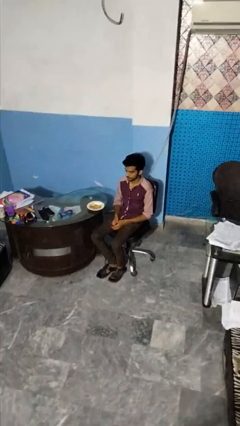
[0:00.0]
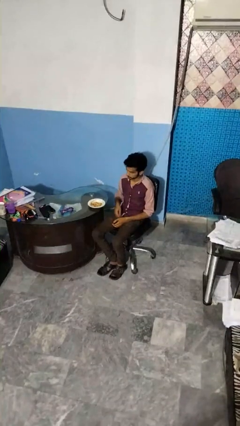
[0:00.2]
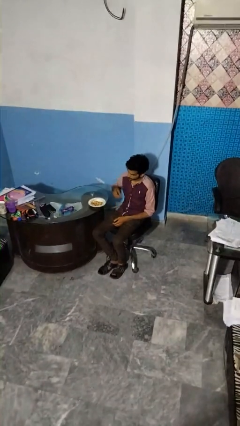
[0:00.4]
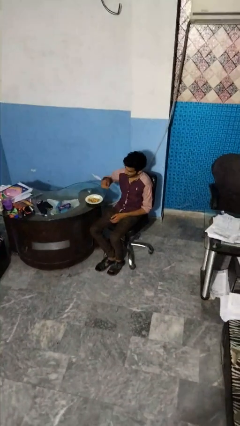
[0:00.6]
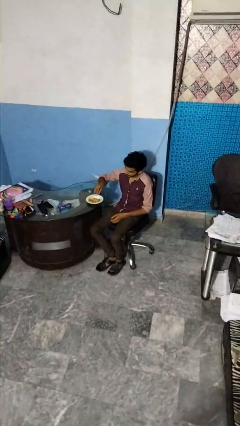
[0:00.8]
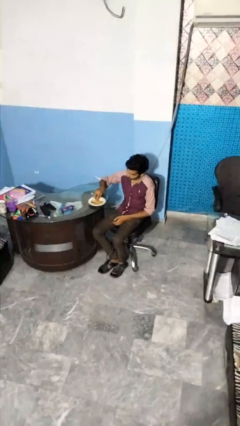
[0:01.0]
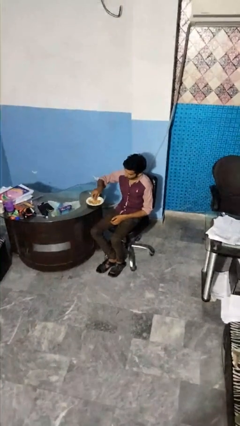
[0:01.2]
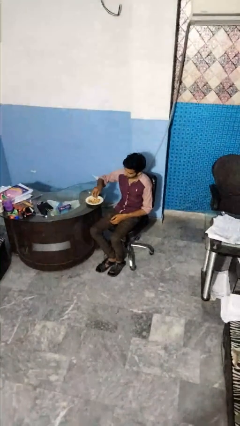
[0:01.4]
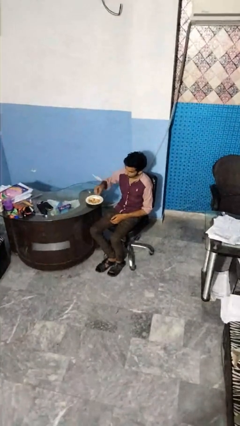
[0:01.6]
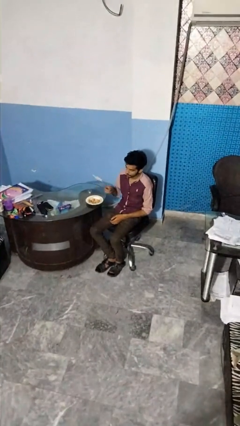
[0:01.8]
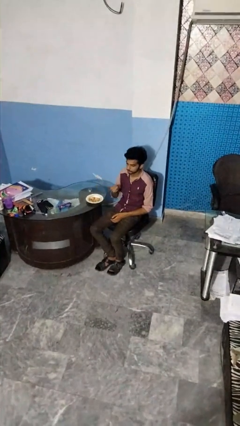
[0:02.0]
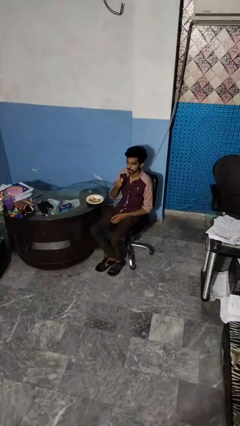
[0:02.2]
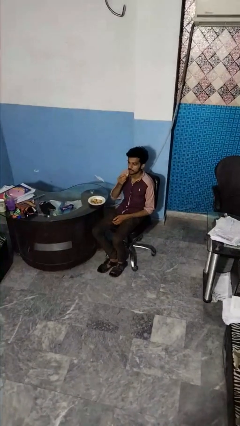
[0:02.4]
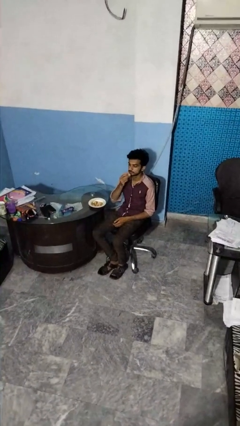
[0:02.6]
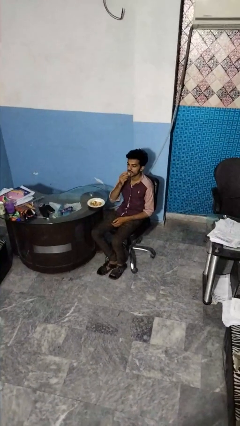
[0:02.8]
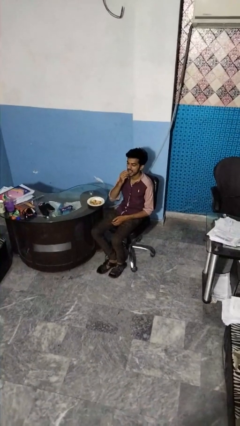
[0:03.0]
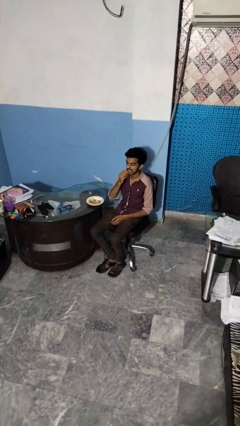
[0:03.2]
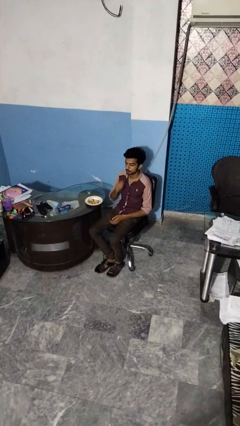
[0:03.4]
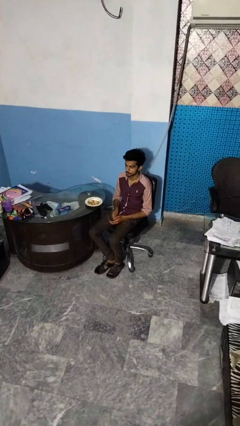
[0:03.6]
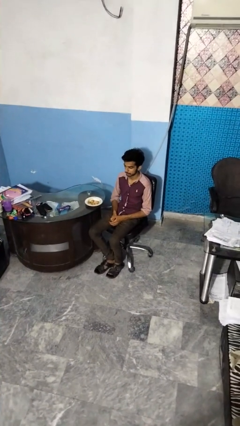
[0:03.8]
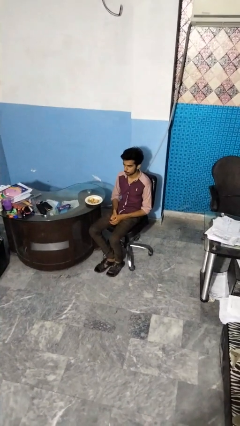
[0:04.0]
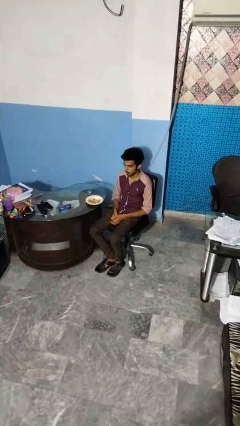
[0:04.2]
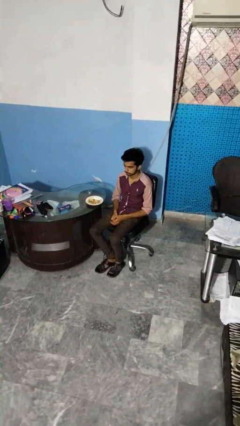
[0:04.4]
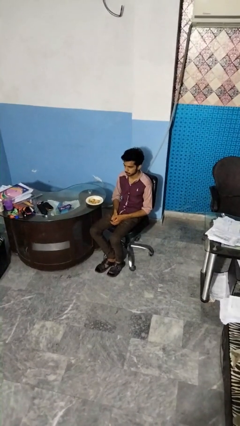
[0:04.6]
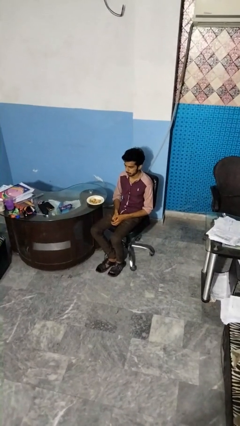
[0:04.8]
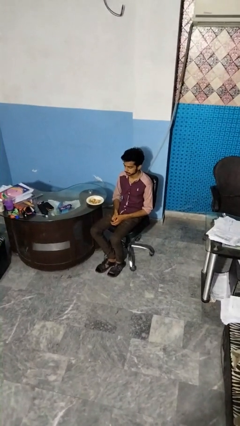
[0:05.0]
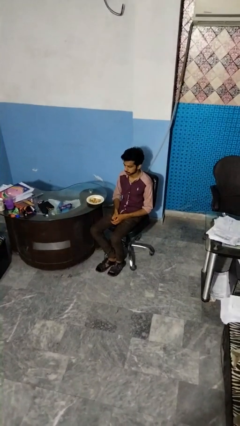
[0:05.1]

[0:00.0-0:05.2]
person eats with hands

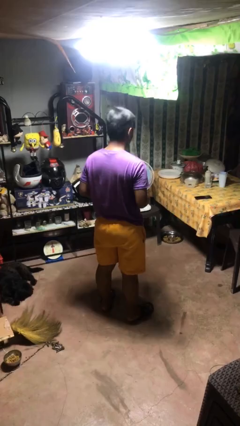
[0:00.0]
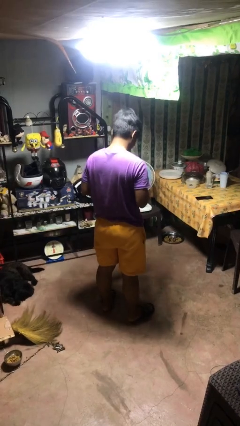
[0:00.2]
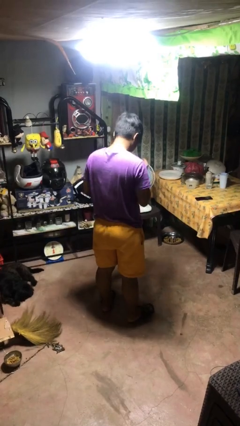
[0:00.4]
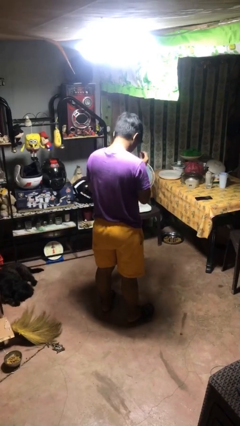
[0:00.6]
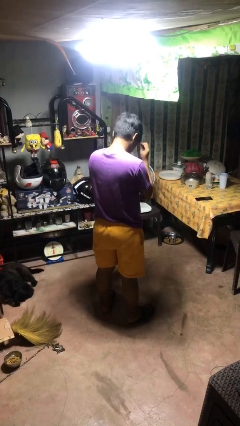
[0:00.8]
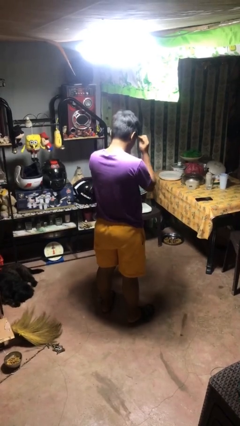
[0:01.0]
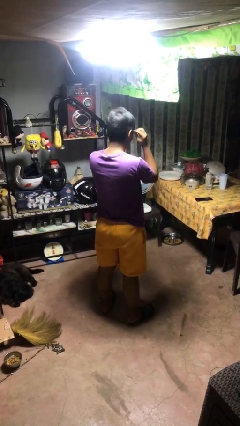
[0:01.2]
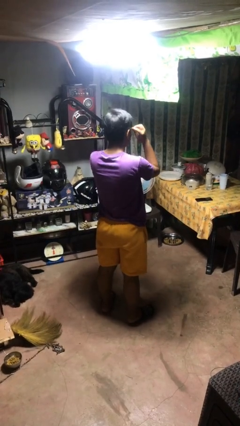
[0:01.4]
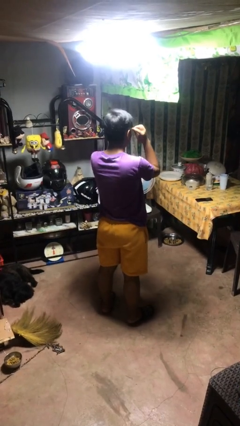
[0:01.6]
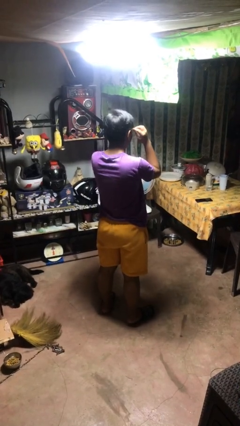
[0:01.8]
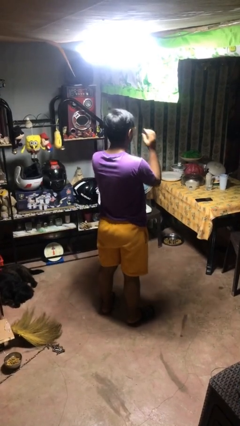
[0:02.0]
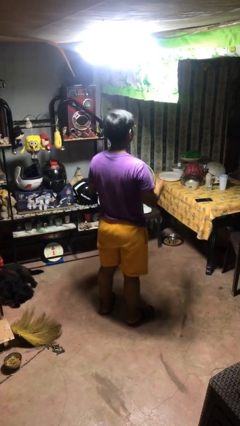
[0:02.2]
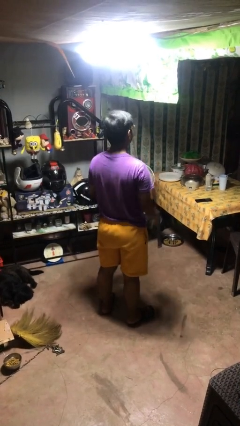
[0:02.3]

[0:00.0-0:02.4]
person puts on glasses

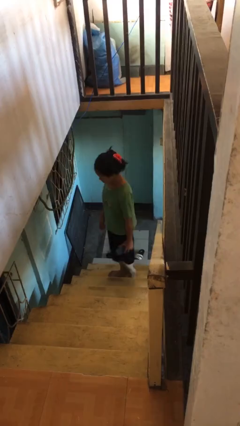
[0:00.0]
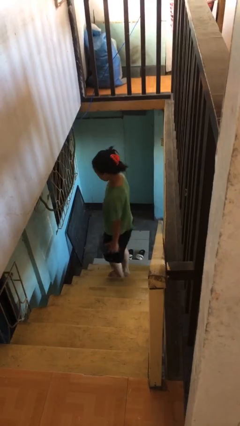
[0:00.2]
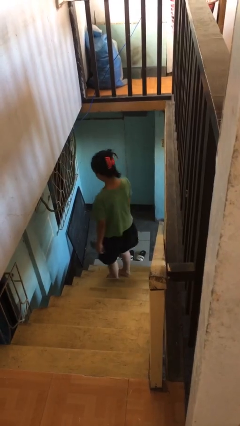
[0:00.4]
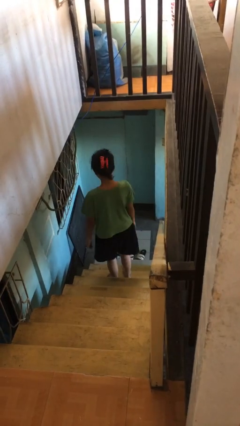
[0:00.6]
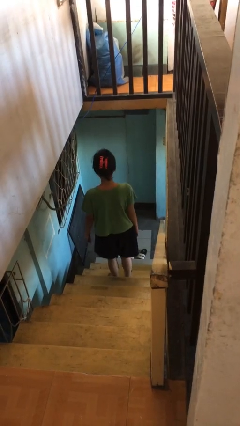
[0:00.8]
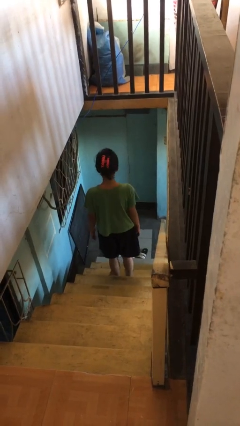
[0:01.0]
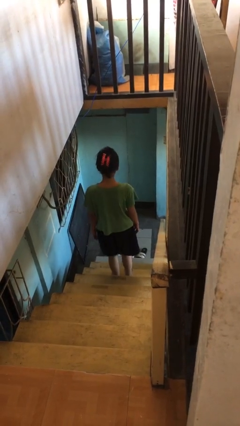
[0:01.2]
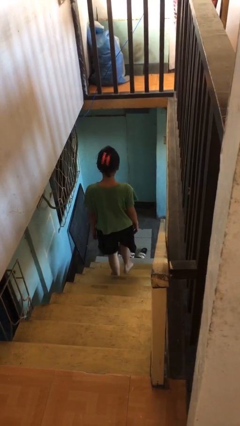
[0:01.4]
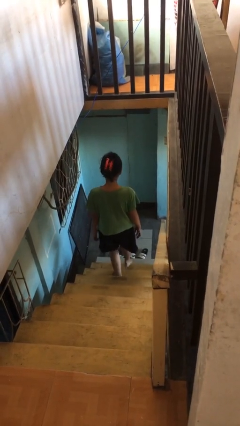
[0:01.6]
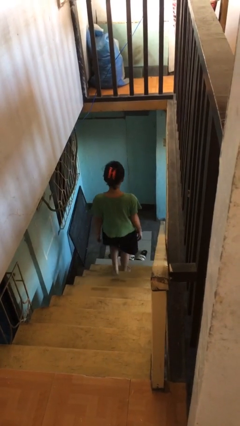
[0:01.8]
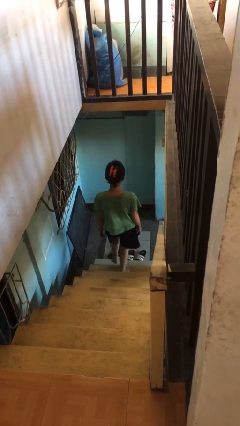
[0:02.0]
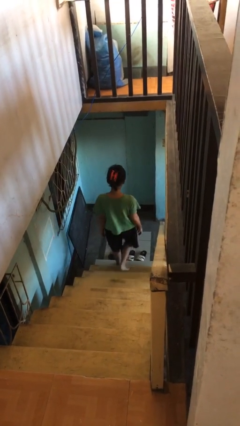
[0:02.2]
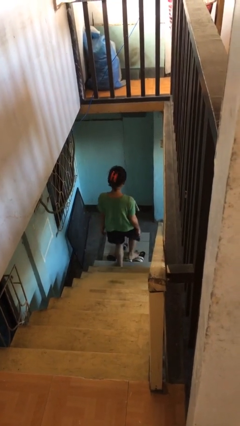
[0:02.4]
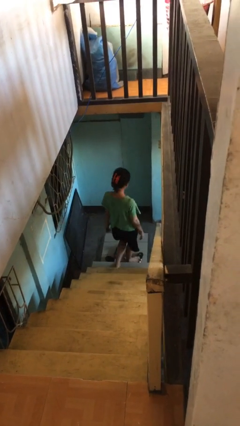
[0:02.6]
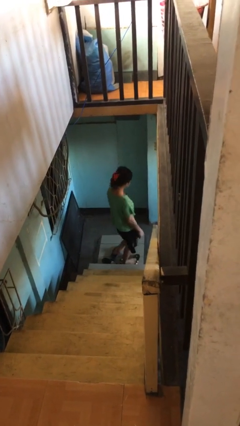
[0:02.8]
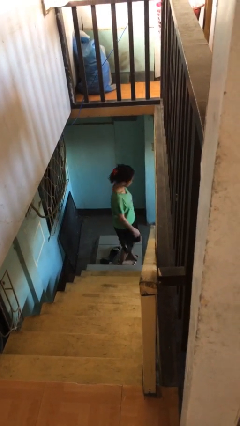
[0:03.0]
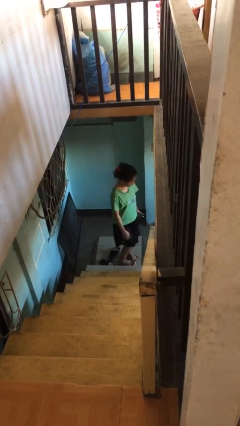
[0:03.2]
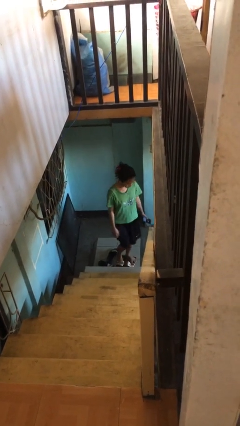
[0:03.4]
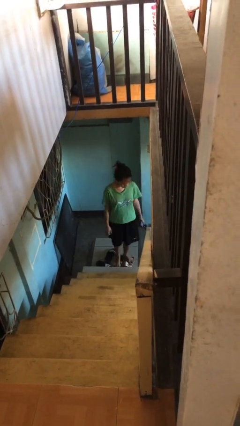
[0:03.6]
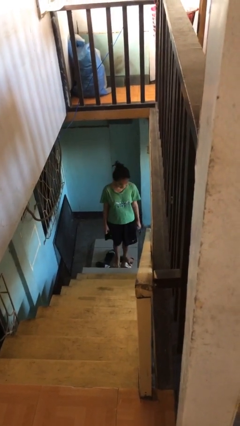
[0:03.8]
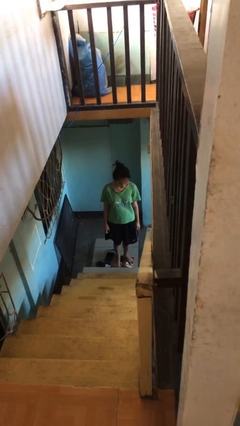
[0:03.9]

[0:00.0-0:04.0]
person climbs down stairs

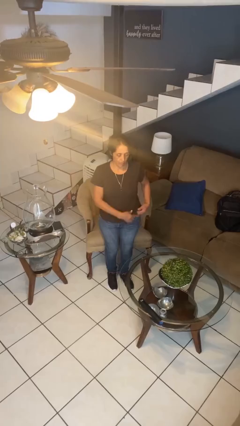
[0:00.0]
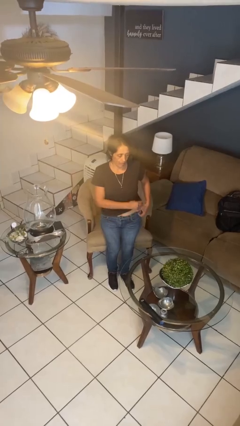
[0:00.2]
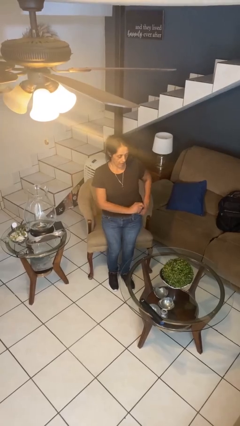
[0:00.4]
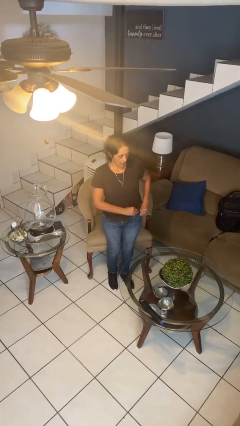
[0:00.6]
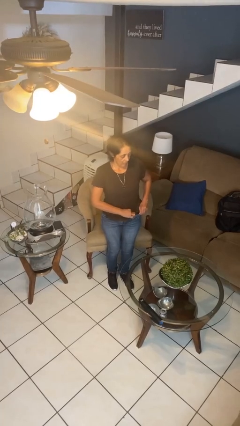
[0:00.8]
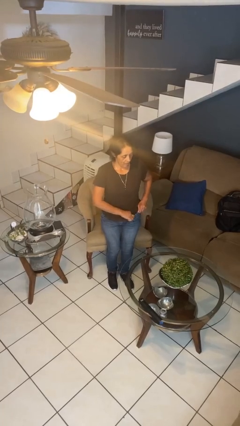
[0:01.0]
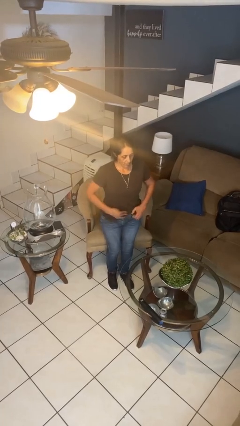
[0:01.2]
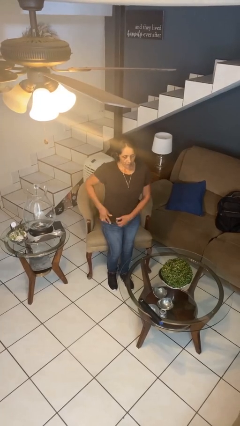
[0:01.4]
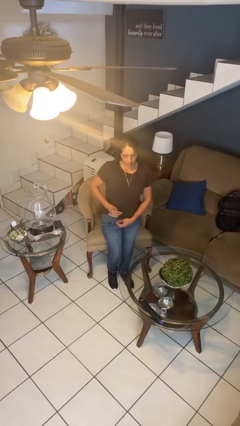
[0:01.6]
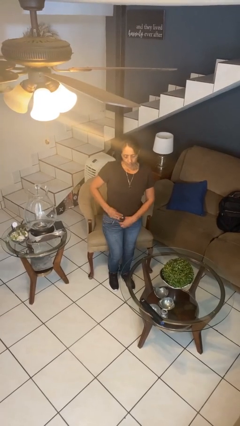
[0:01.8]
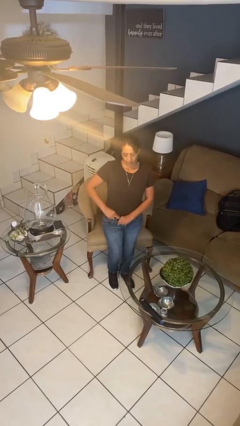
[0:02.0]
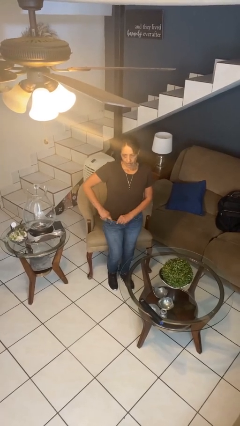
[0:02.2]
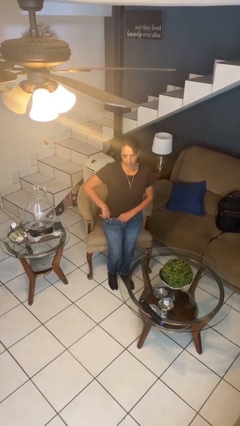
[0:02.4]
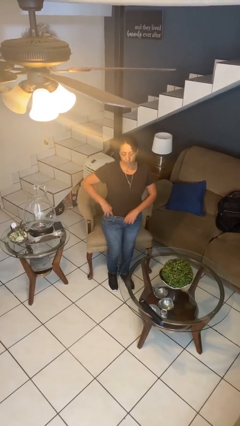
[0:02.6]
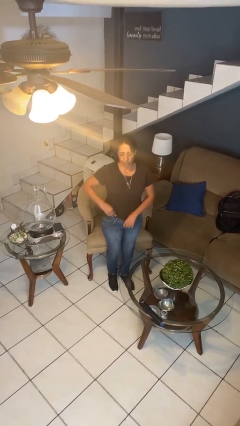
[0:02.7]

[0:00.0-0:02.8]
person tucks in shirt

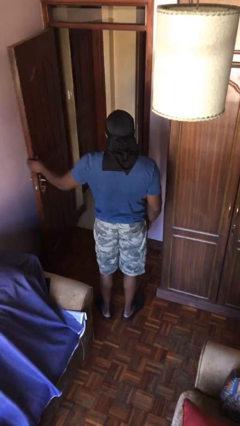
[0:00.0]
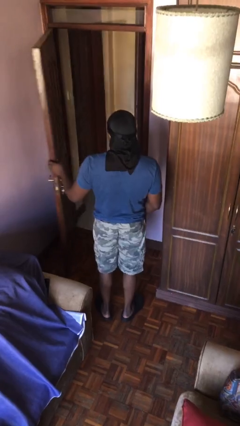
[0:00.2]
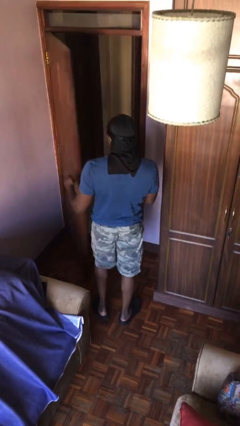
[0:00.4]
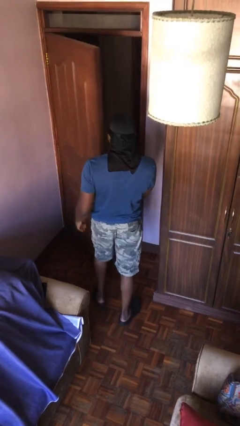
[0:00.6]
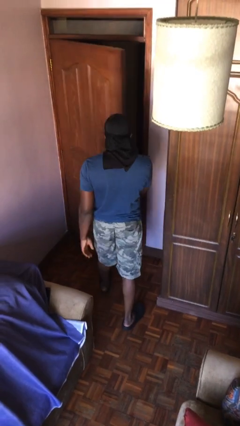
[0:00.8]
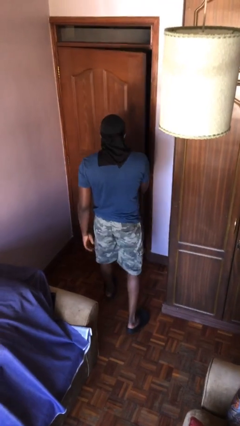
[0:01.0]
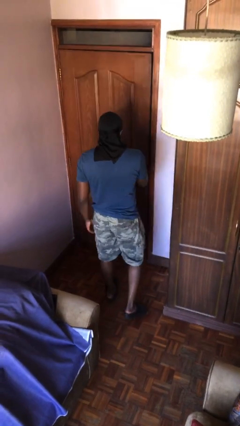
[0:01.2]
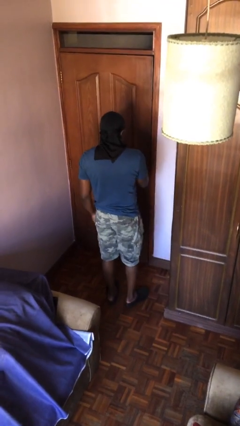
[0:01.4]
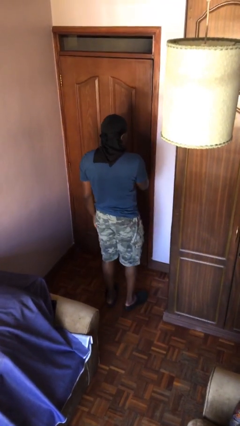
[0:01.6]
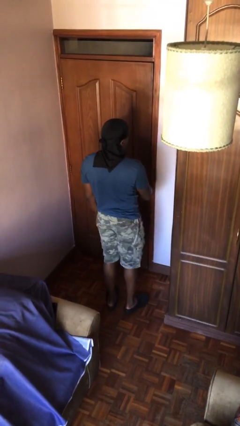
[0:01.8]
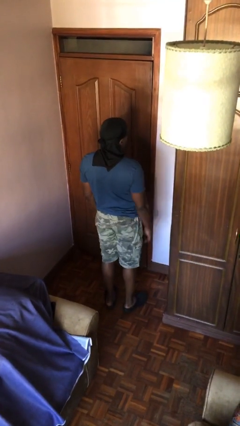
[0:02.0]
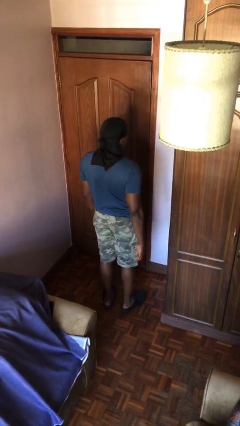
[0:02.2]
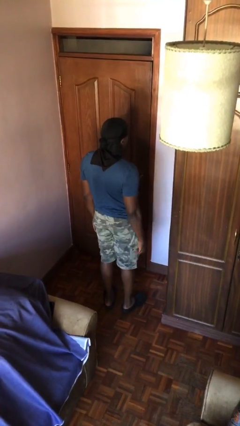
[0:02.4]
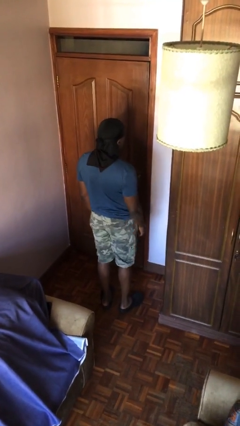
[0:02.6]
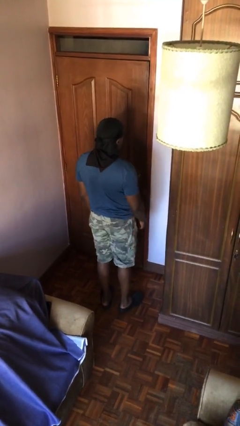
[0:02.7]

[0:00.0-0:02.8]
person closes facility door

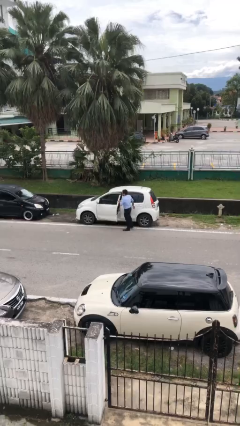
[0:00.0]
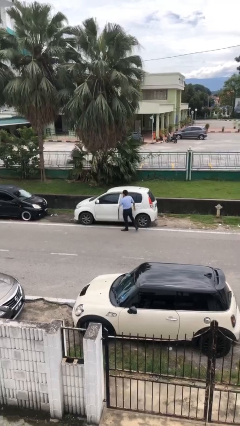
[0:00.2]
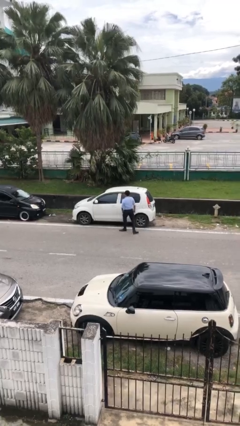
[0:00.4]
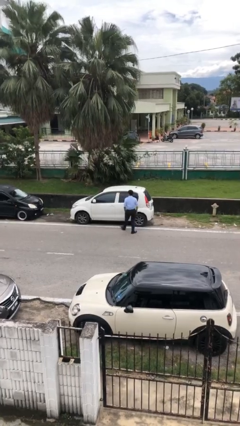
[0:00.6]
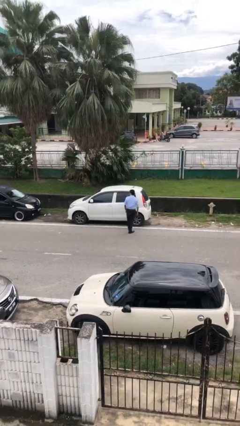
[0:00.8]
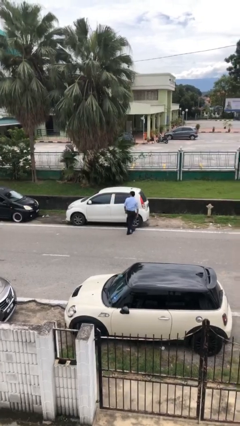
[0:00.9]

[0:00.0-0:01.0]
person closes car door
